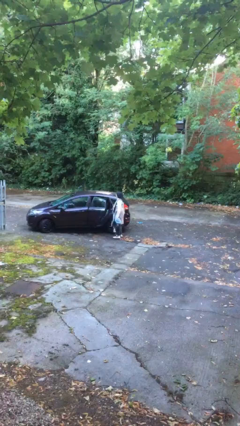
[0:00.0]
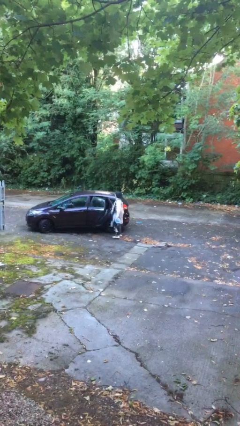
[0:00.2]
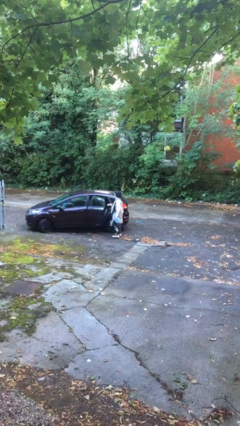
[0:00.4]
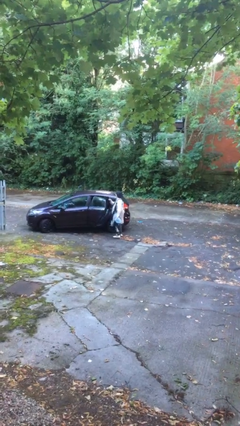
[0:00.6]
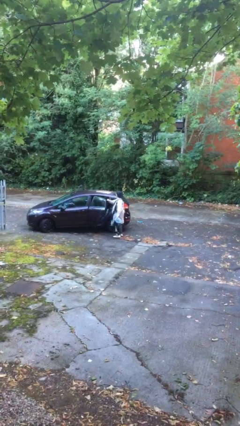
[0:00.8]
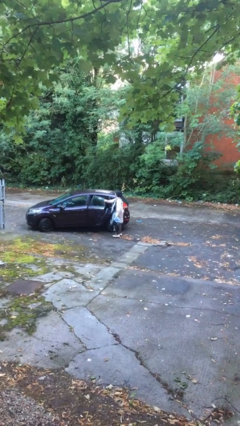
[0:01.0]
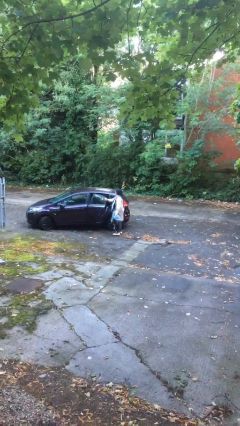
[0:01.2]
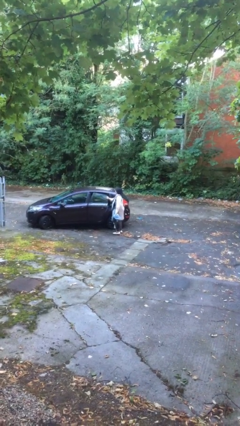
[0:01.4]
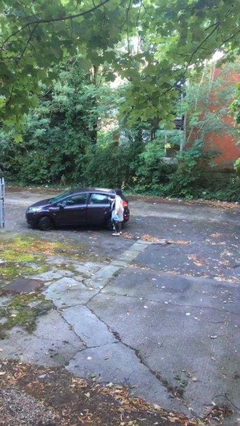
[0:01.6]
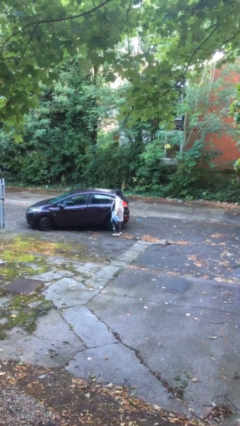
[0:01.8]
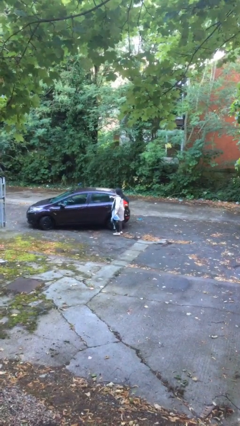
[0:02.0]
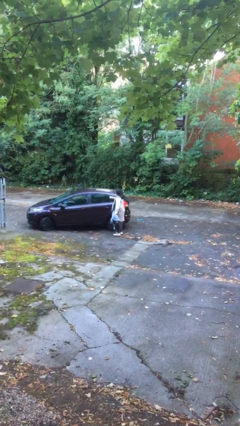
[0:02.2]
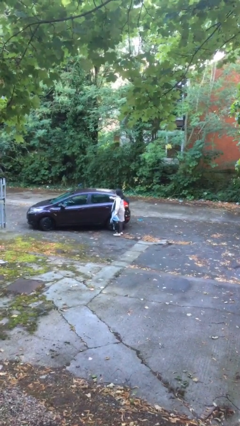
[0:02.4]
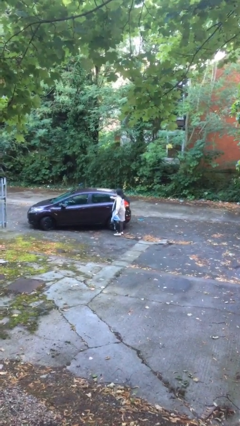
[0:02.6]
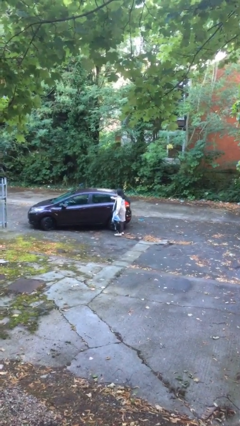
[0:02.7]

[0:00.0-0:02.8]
person closes car door

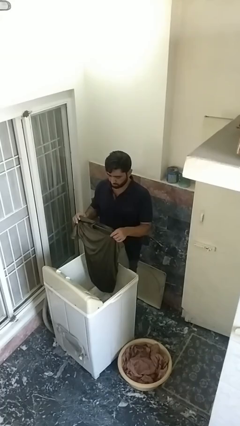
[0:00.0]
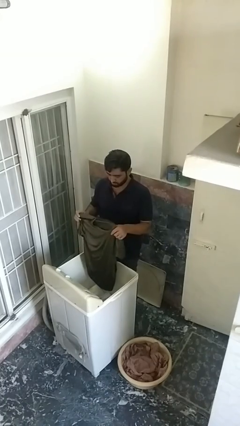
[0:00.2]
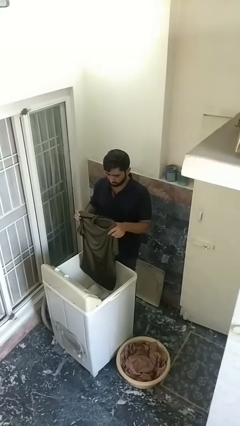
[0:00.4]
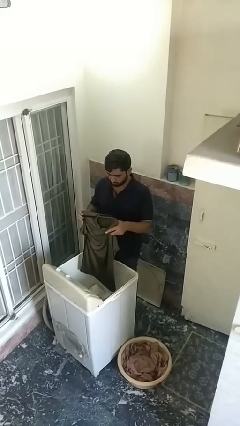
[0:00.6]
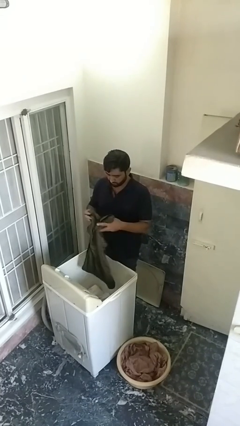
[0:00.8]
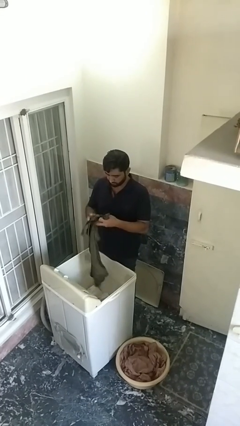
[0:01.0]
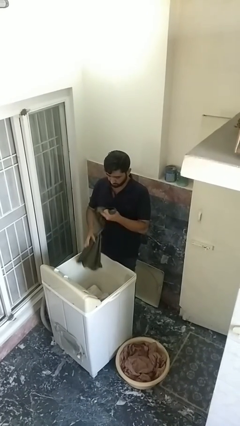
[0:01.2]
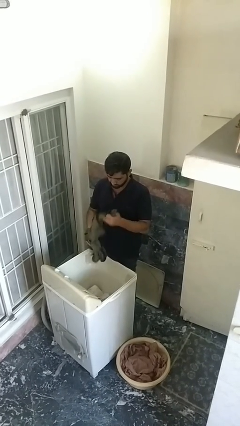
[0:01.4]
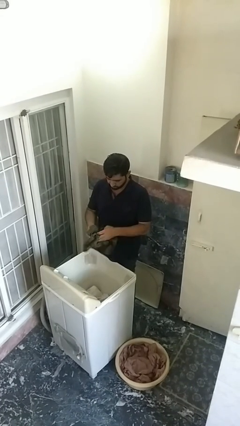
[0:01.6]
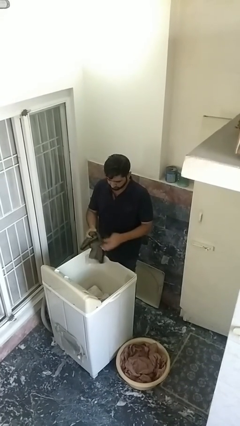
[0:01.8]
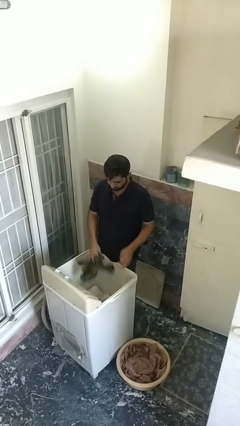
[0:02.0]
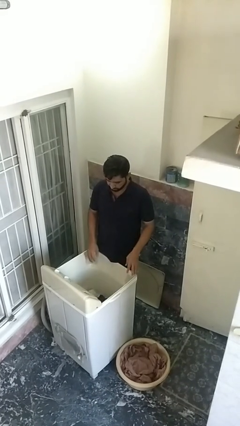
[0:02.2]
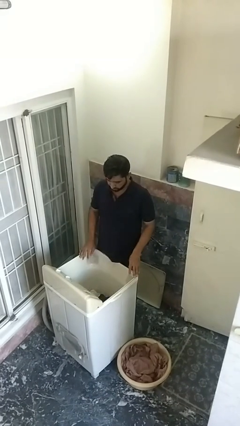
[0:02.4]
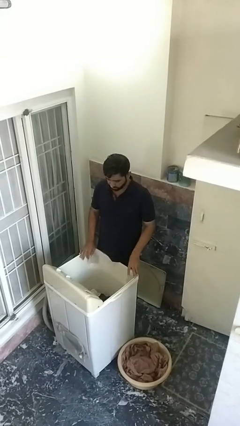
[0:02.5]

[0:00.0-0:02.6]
person loads clotheswasher

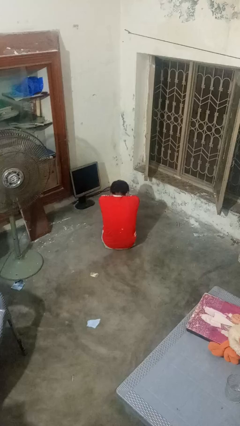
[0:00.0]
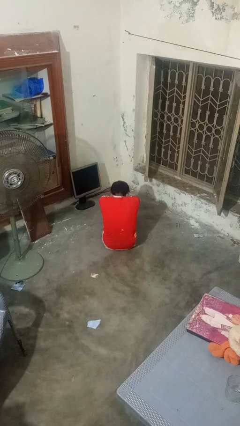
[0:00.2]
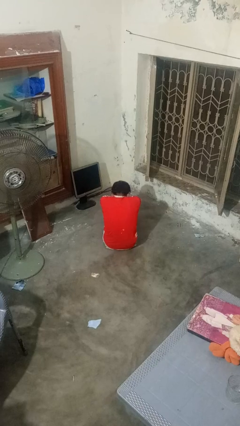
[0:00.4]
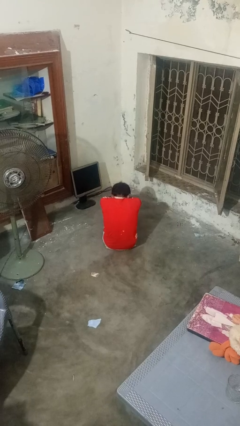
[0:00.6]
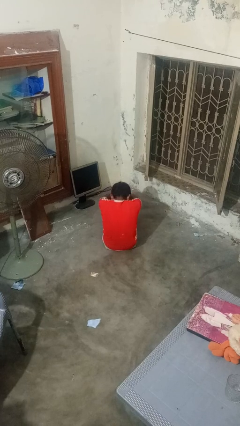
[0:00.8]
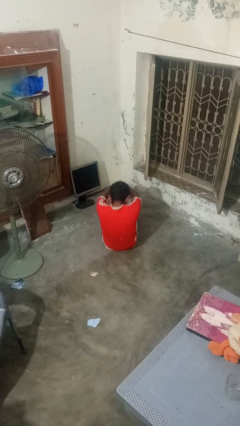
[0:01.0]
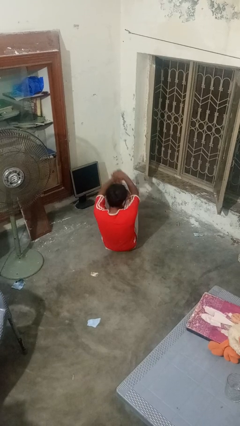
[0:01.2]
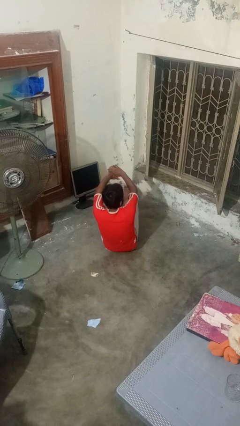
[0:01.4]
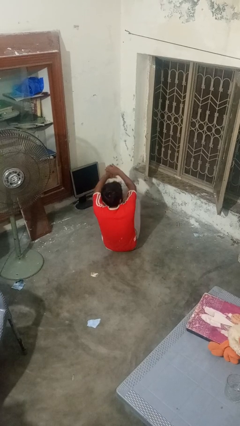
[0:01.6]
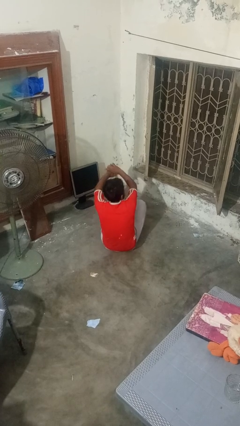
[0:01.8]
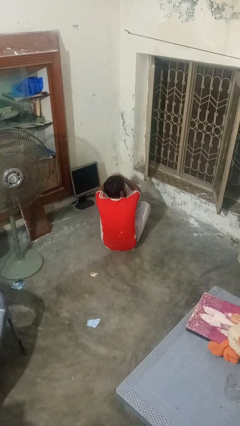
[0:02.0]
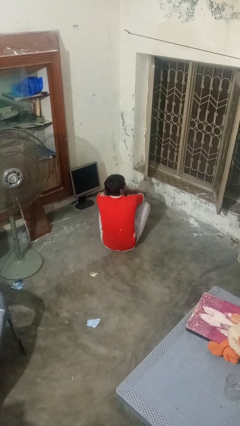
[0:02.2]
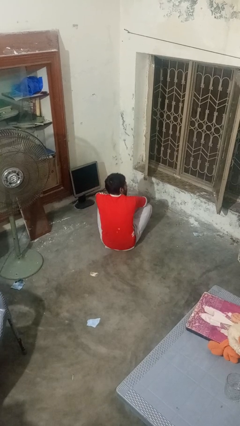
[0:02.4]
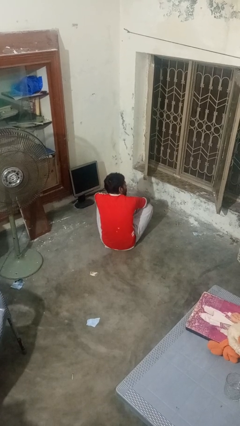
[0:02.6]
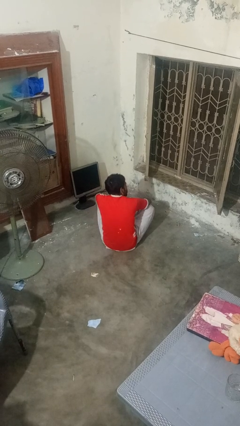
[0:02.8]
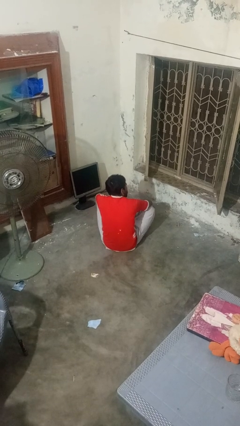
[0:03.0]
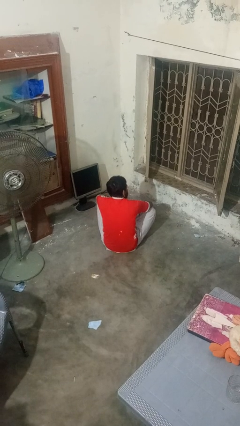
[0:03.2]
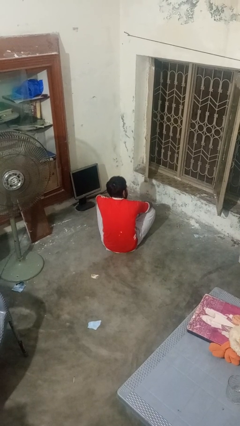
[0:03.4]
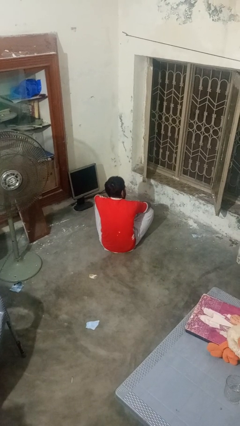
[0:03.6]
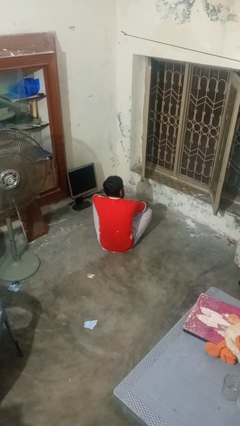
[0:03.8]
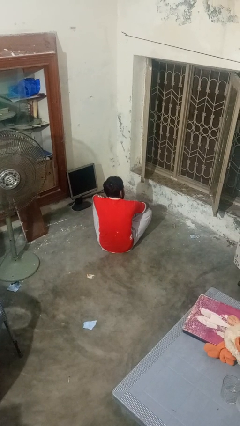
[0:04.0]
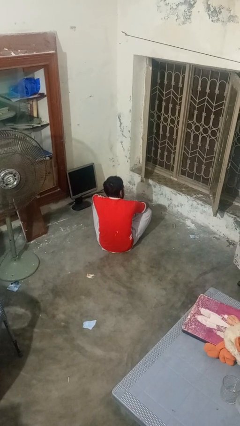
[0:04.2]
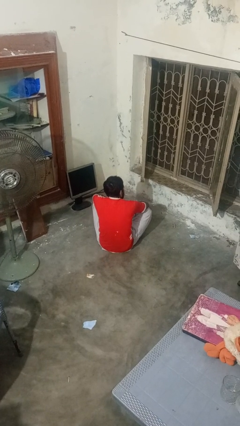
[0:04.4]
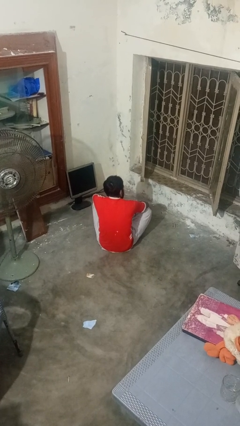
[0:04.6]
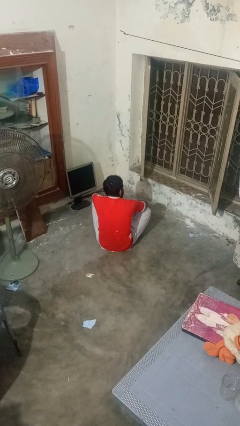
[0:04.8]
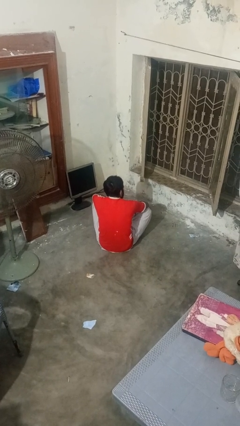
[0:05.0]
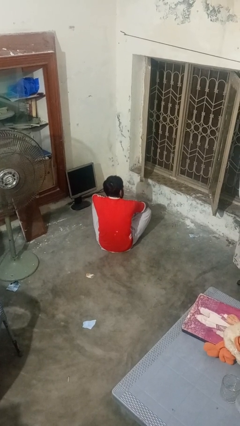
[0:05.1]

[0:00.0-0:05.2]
person crosses legs

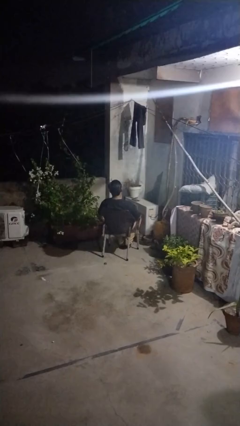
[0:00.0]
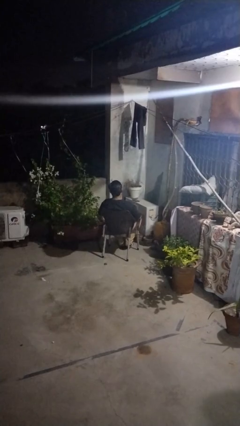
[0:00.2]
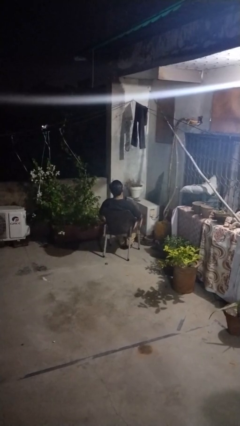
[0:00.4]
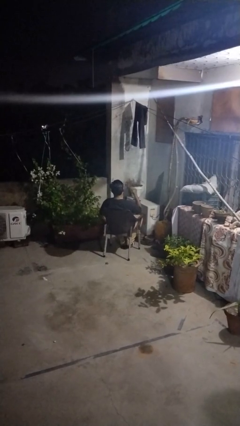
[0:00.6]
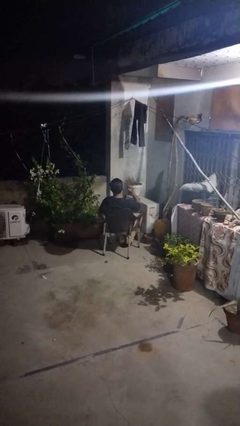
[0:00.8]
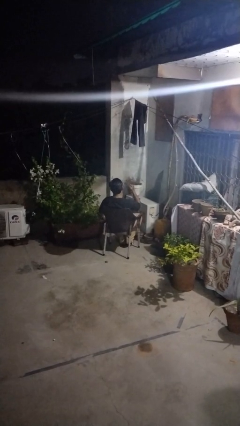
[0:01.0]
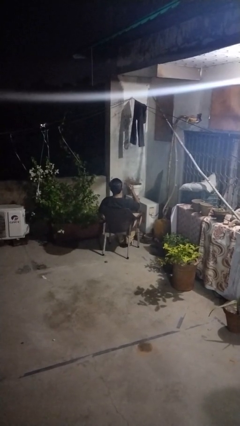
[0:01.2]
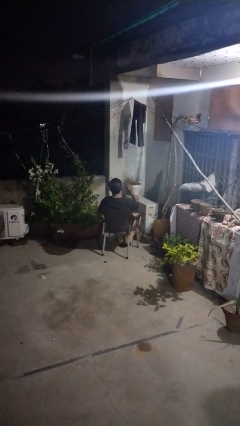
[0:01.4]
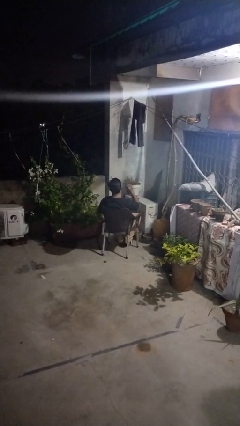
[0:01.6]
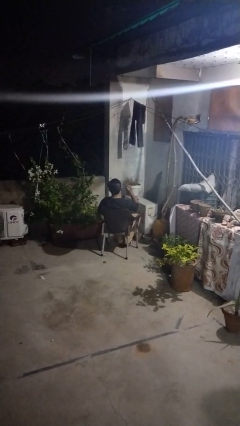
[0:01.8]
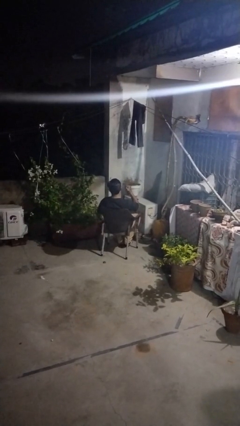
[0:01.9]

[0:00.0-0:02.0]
person gestures behind me

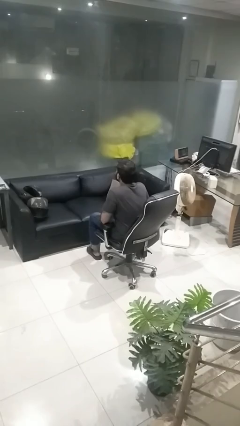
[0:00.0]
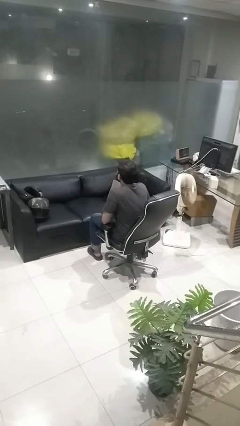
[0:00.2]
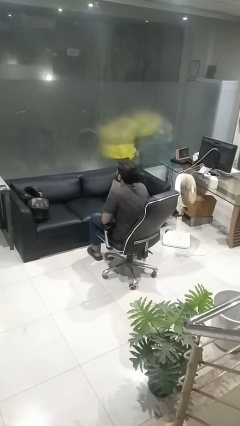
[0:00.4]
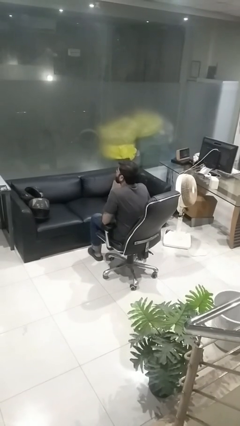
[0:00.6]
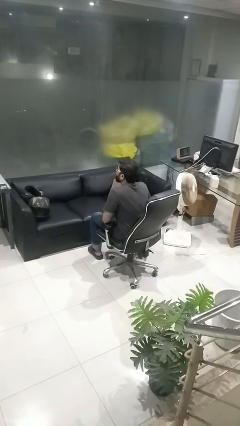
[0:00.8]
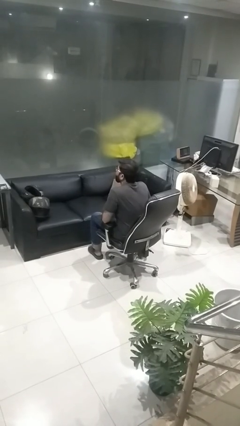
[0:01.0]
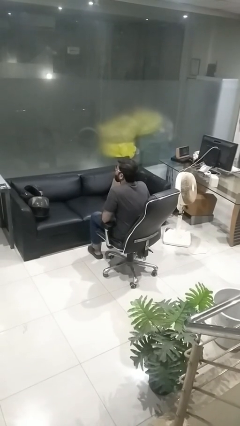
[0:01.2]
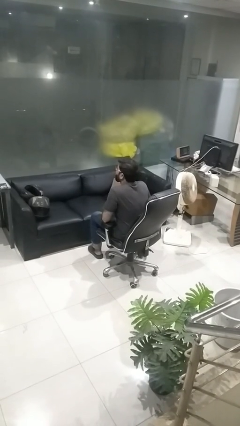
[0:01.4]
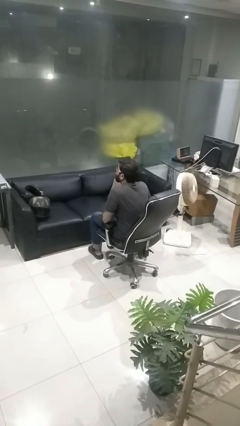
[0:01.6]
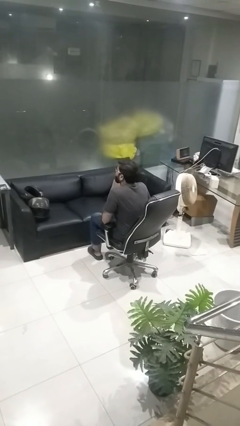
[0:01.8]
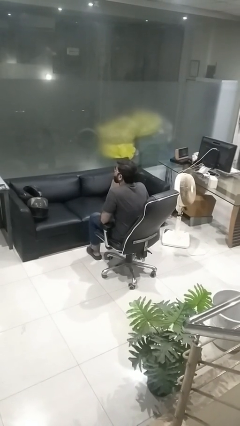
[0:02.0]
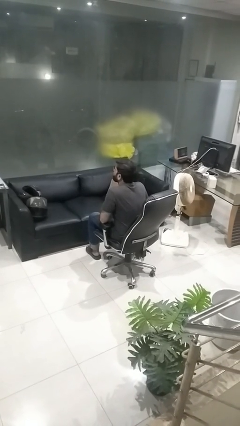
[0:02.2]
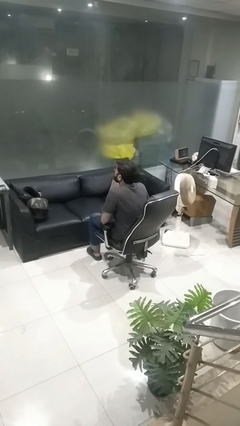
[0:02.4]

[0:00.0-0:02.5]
person sticks out tongue

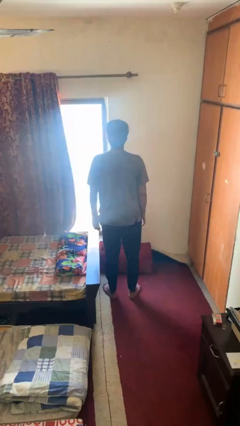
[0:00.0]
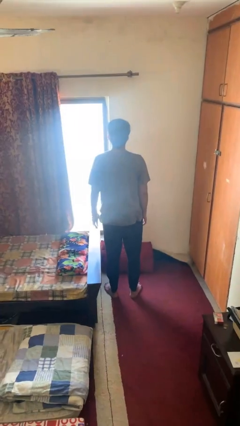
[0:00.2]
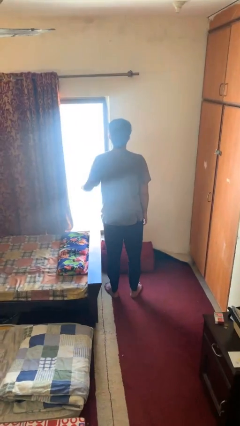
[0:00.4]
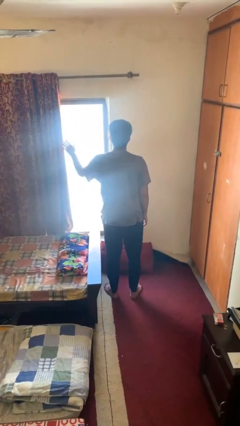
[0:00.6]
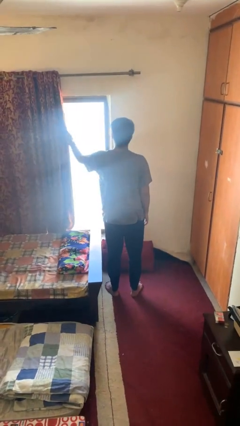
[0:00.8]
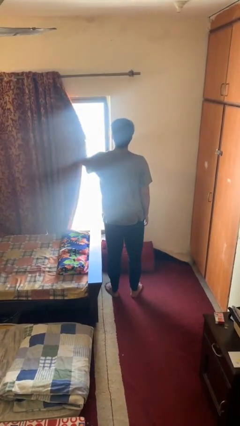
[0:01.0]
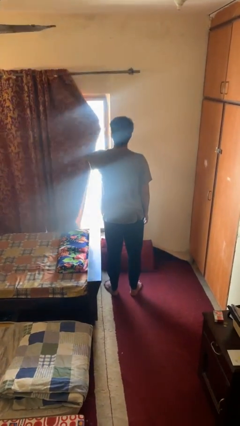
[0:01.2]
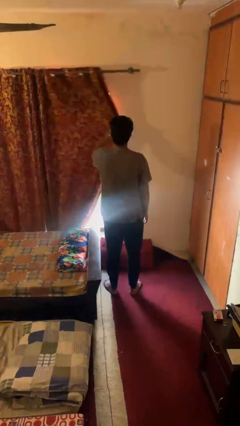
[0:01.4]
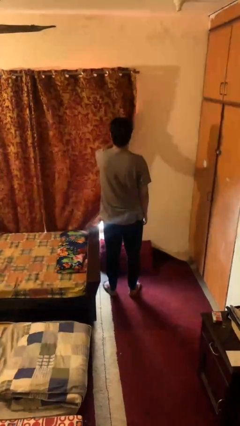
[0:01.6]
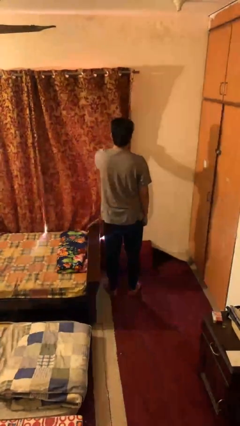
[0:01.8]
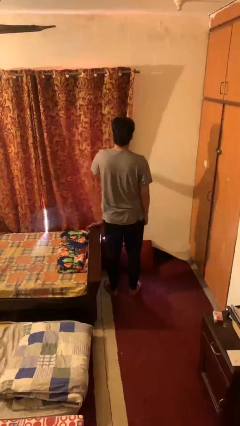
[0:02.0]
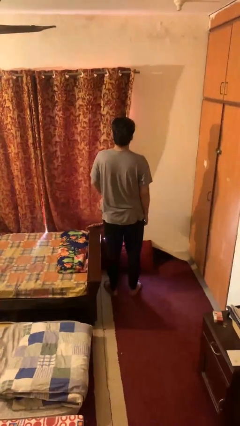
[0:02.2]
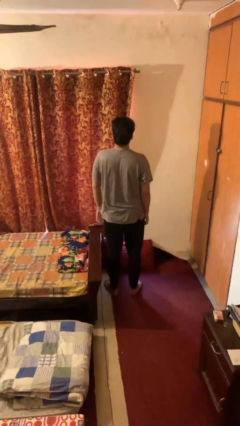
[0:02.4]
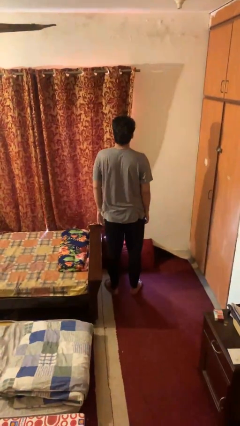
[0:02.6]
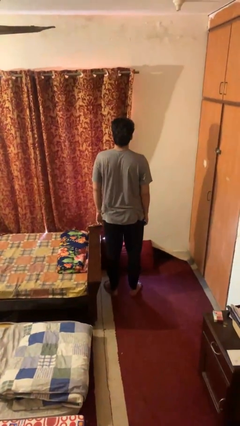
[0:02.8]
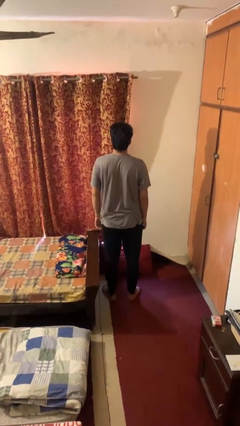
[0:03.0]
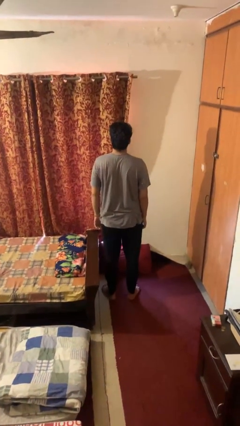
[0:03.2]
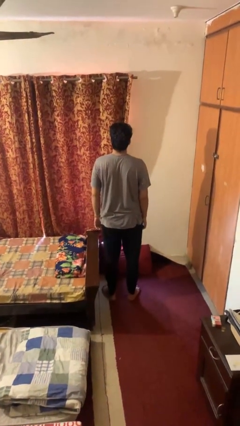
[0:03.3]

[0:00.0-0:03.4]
person closes curtains
